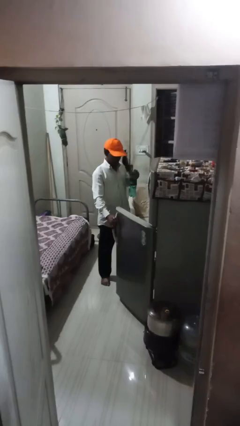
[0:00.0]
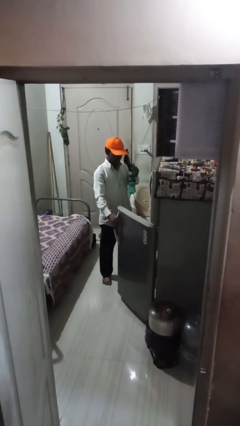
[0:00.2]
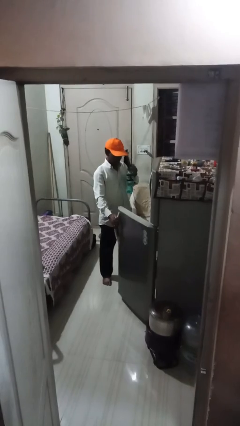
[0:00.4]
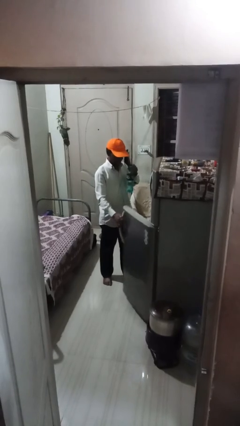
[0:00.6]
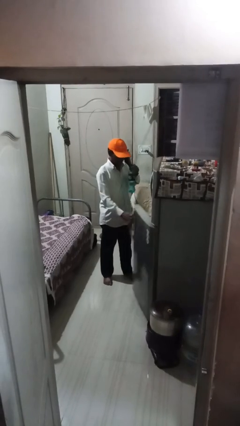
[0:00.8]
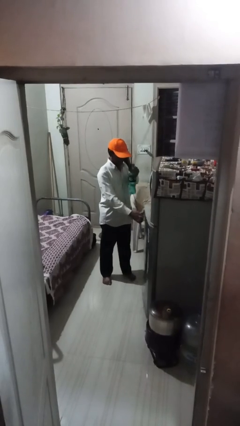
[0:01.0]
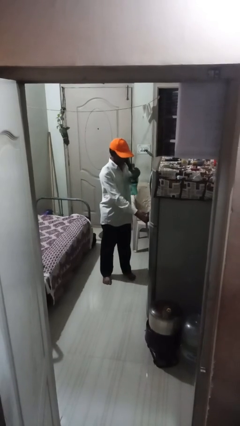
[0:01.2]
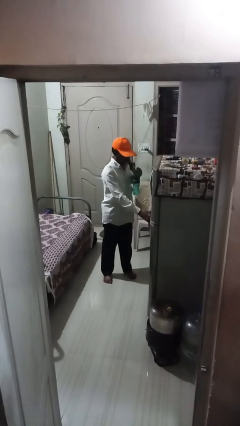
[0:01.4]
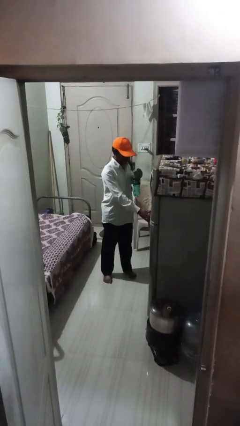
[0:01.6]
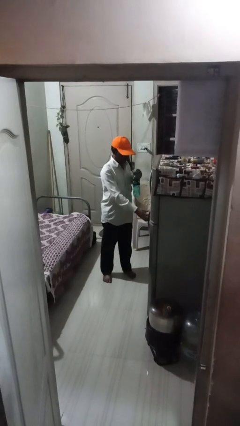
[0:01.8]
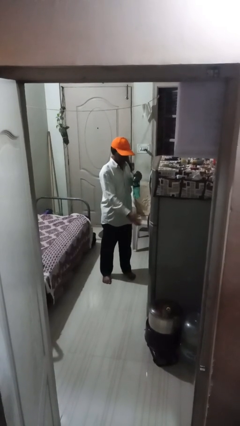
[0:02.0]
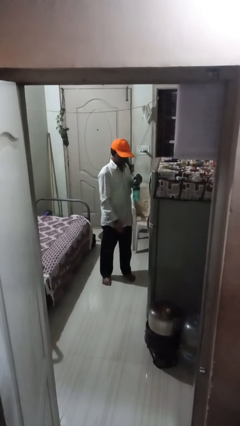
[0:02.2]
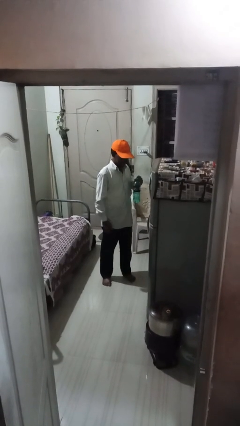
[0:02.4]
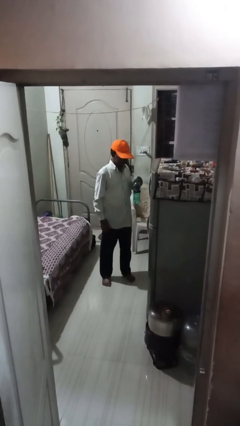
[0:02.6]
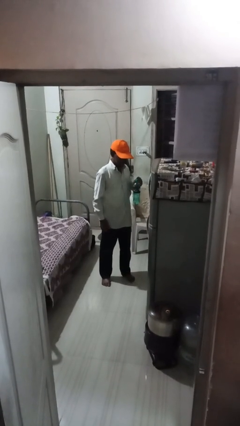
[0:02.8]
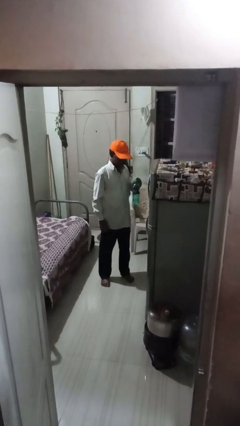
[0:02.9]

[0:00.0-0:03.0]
person closes refrigerator

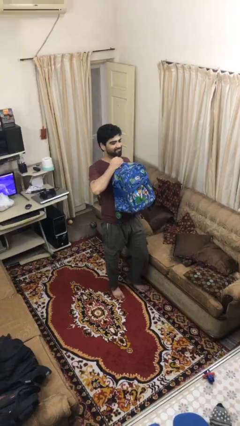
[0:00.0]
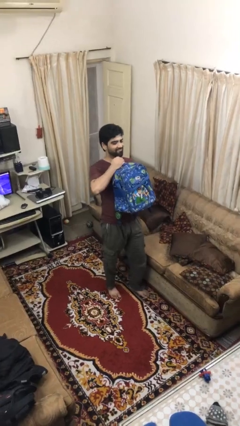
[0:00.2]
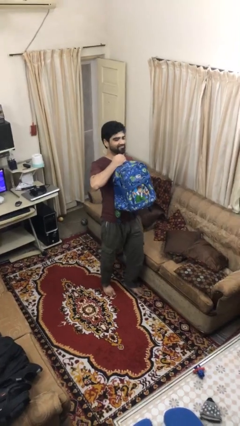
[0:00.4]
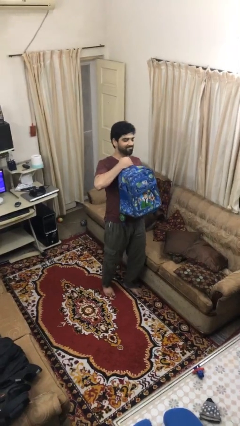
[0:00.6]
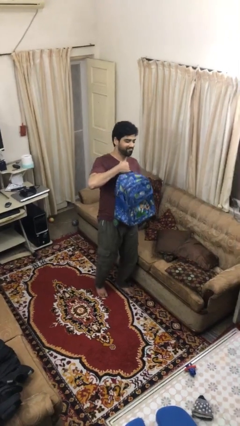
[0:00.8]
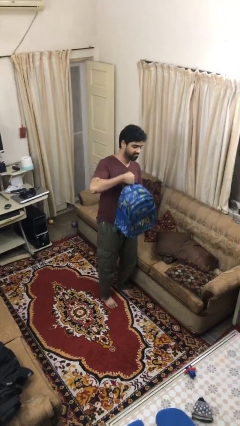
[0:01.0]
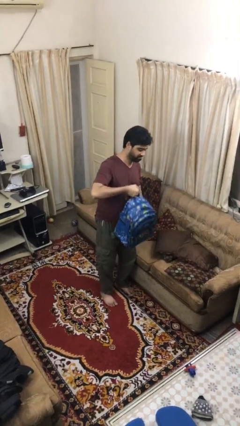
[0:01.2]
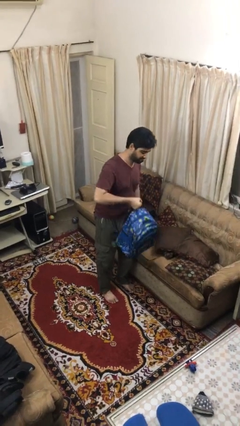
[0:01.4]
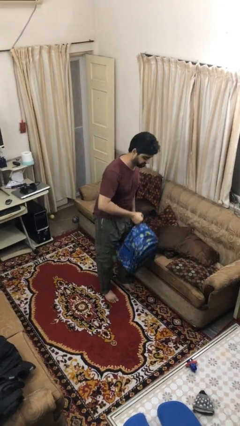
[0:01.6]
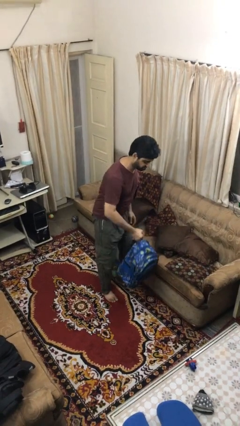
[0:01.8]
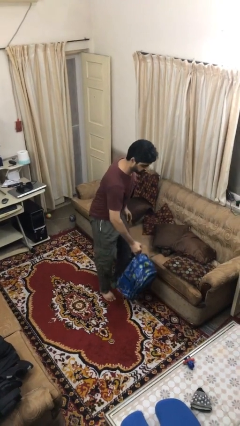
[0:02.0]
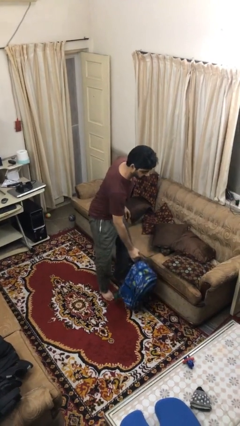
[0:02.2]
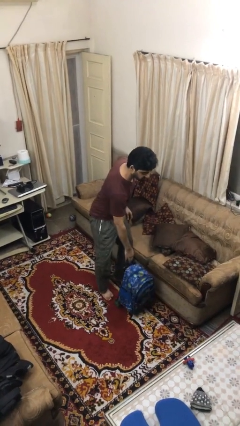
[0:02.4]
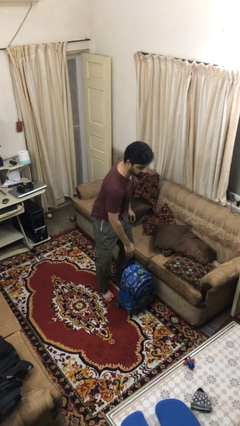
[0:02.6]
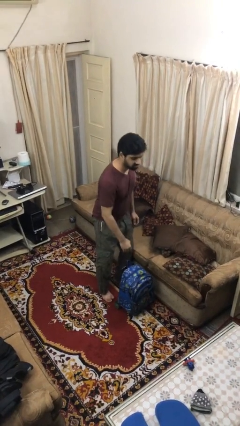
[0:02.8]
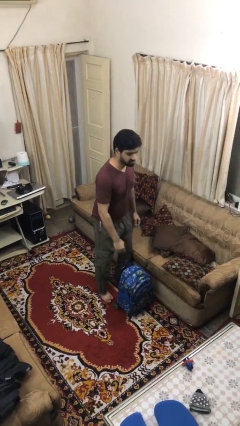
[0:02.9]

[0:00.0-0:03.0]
person puts down object on floor

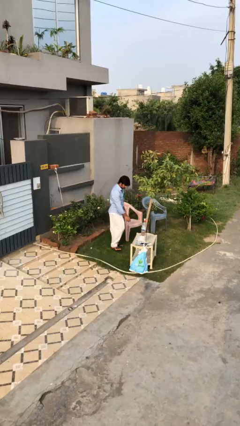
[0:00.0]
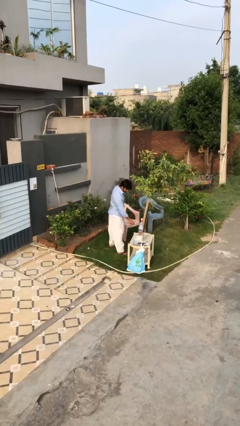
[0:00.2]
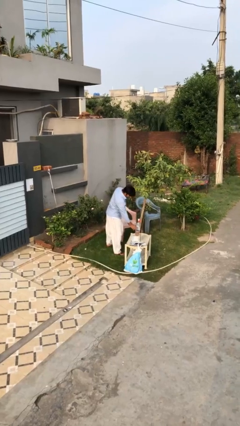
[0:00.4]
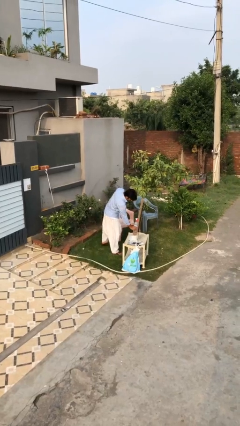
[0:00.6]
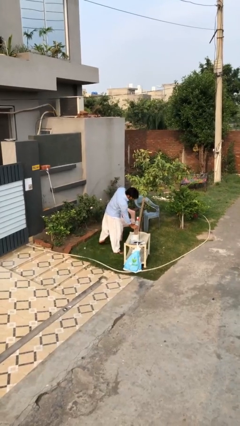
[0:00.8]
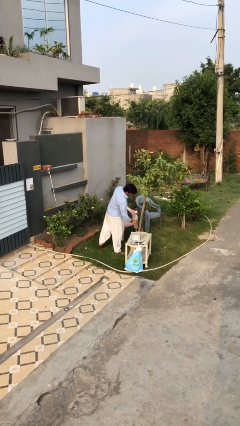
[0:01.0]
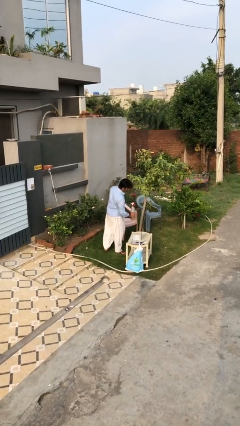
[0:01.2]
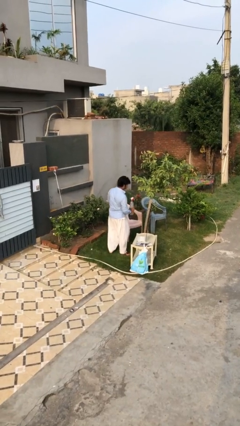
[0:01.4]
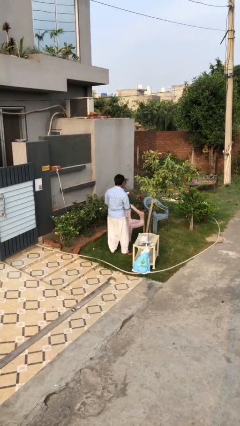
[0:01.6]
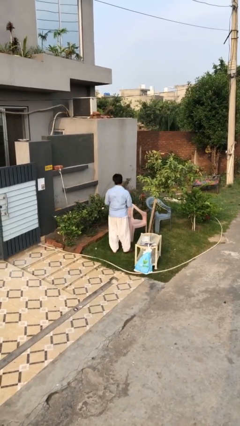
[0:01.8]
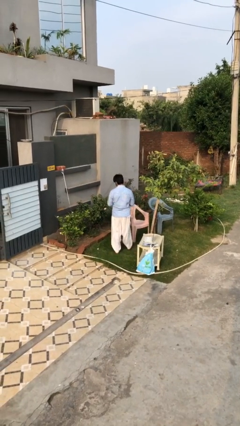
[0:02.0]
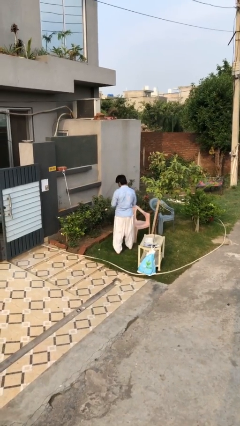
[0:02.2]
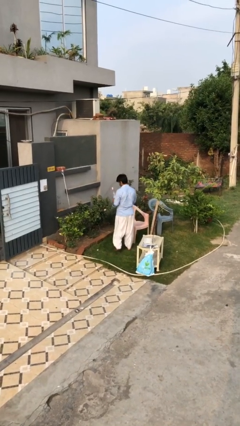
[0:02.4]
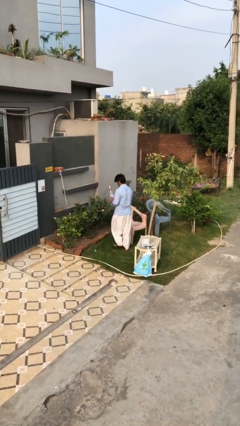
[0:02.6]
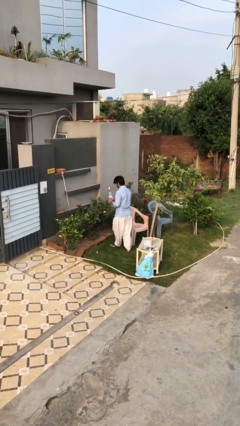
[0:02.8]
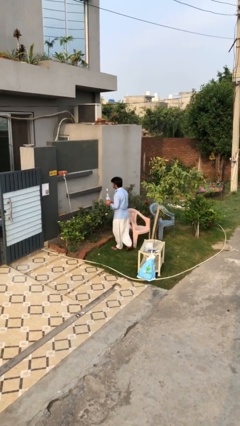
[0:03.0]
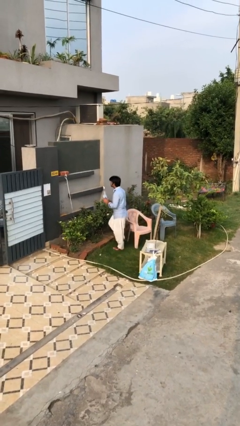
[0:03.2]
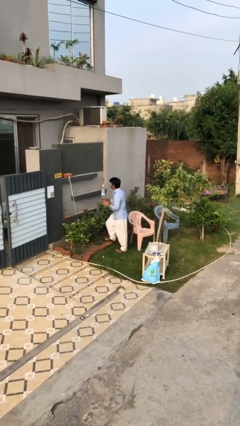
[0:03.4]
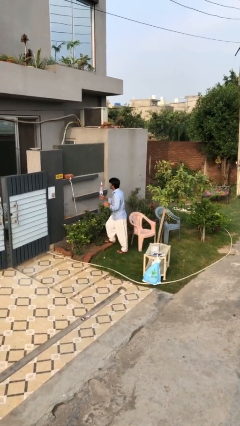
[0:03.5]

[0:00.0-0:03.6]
person picks up object from table

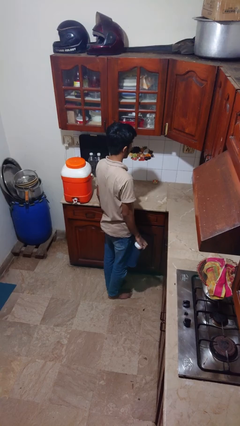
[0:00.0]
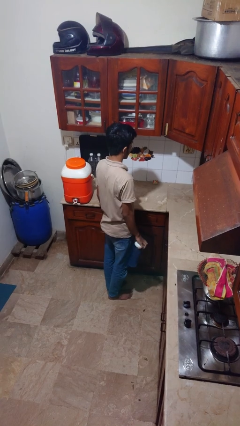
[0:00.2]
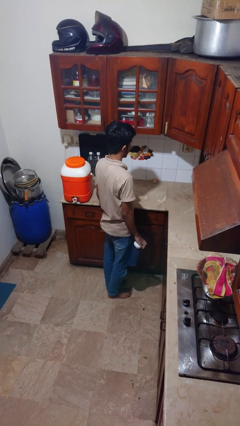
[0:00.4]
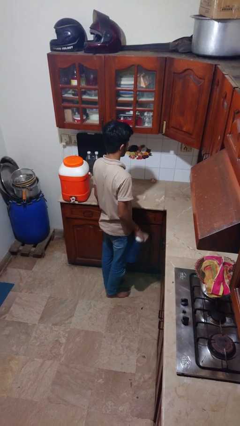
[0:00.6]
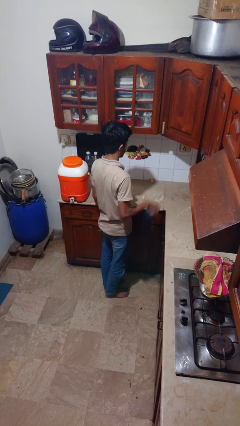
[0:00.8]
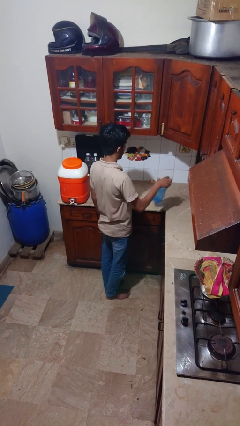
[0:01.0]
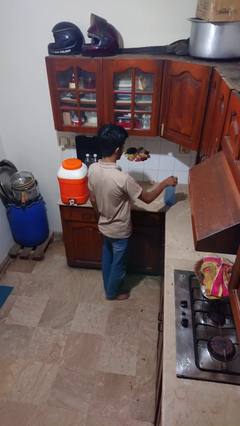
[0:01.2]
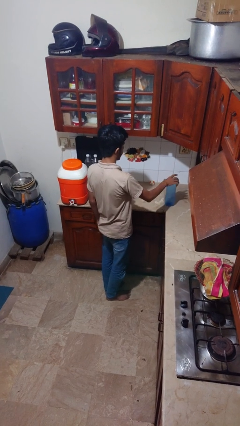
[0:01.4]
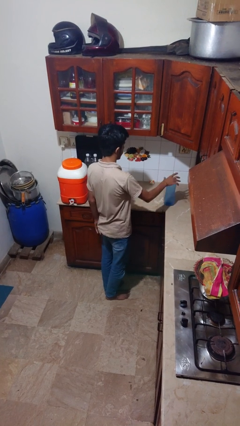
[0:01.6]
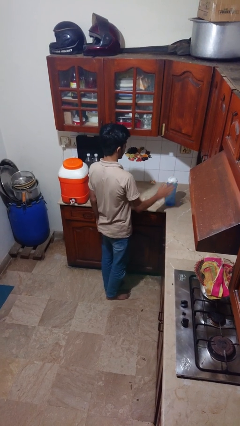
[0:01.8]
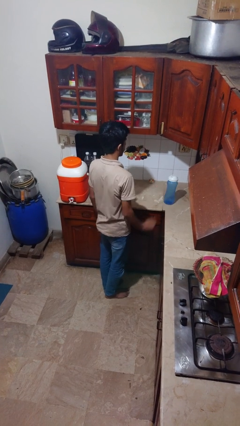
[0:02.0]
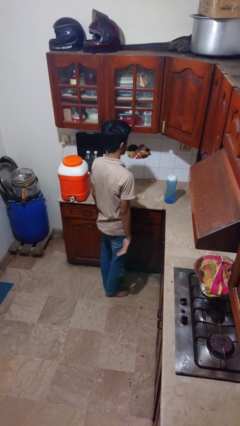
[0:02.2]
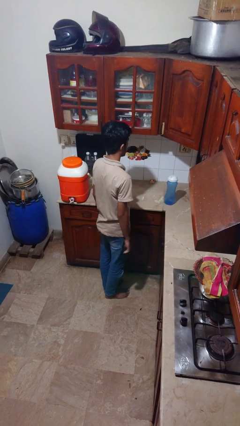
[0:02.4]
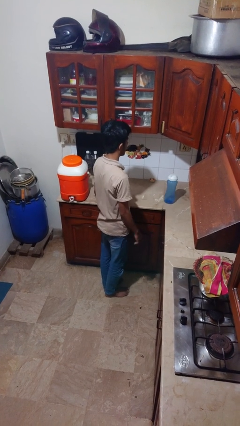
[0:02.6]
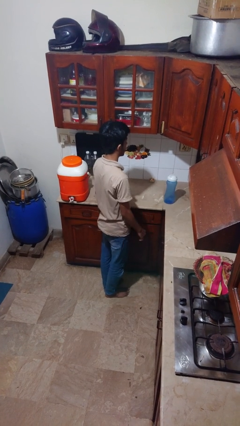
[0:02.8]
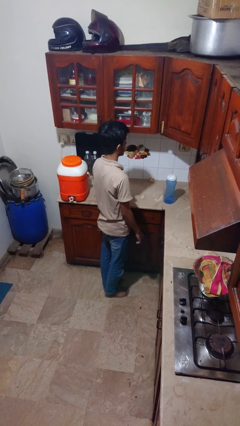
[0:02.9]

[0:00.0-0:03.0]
person puts down object on countertop

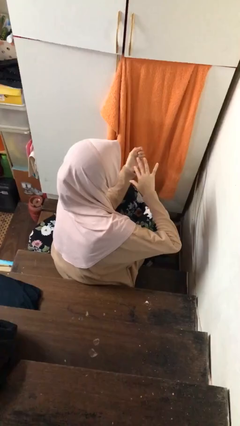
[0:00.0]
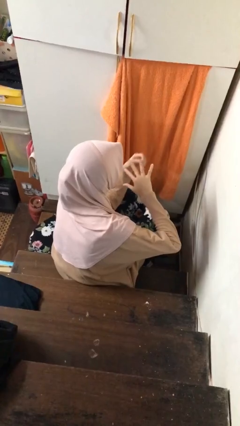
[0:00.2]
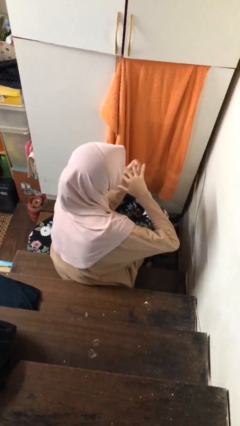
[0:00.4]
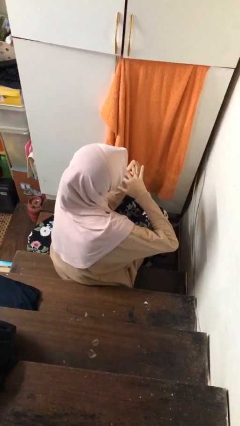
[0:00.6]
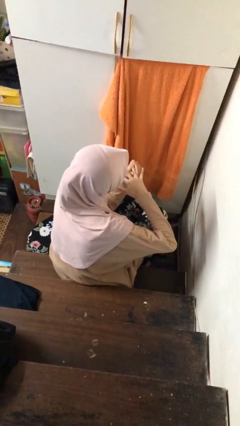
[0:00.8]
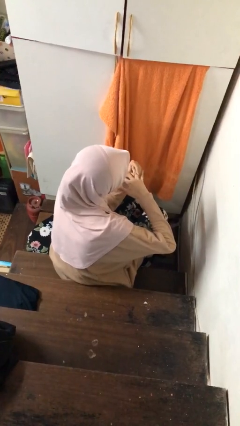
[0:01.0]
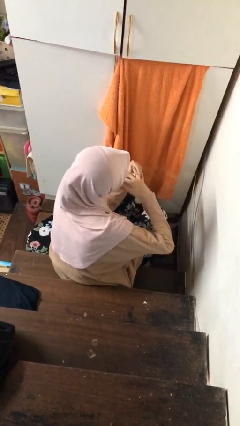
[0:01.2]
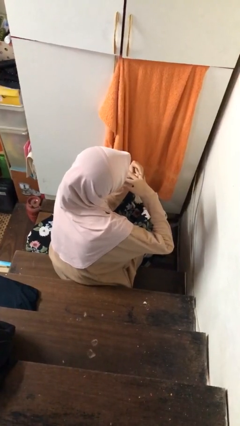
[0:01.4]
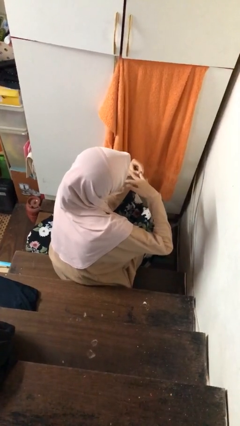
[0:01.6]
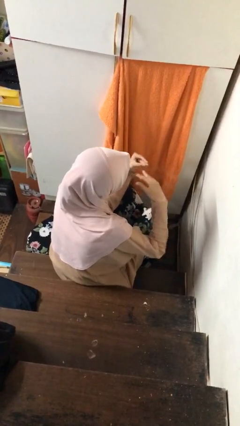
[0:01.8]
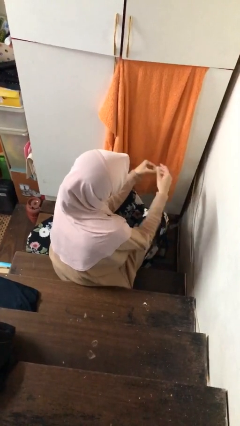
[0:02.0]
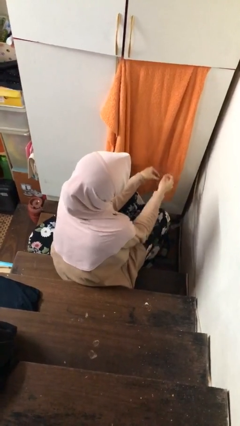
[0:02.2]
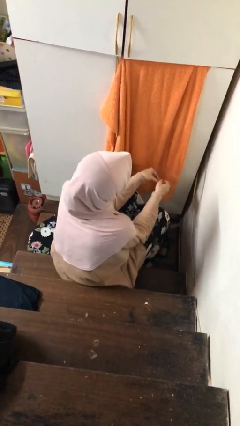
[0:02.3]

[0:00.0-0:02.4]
person takes off ring

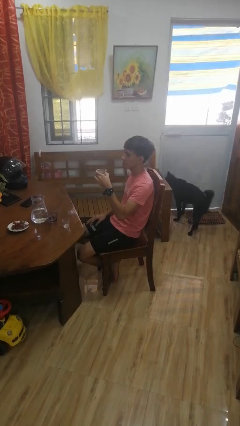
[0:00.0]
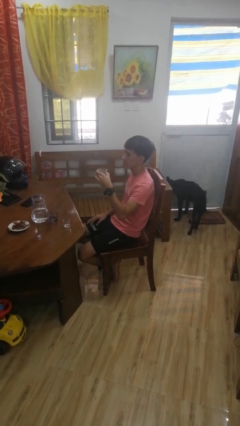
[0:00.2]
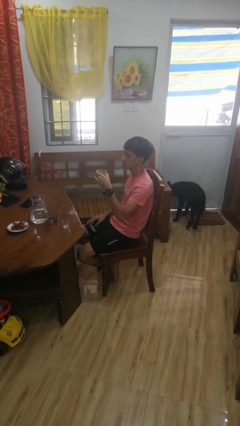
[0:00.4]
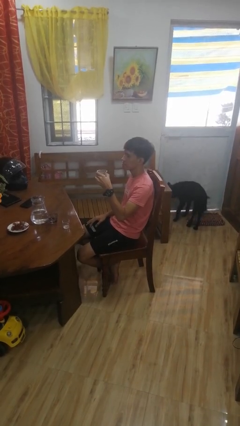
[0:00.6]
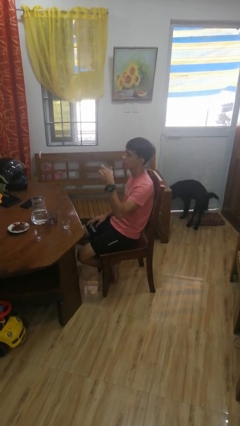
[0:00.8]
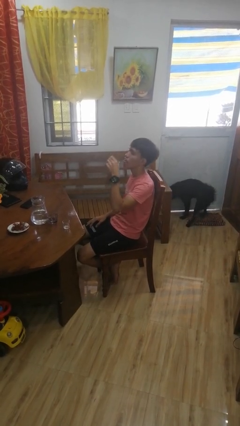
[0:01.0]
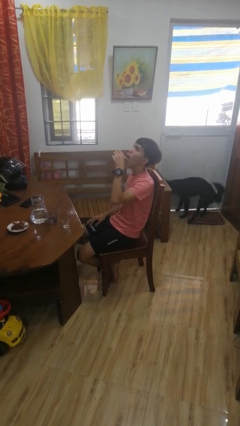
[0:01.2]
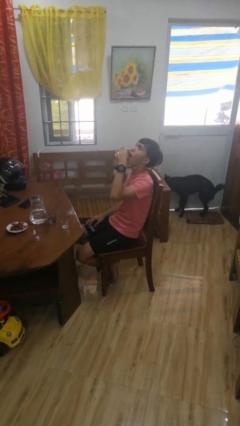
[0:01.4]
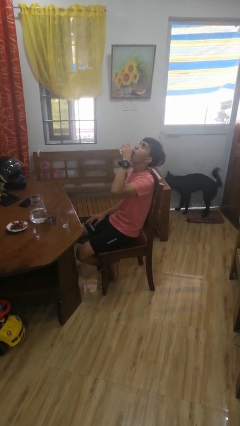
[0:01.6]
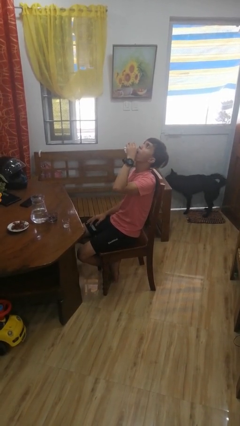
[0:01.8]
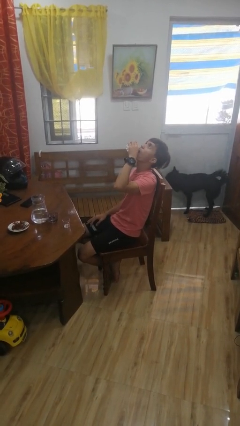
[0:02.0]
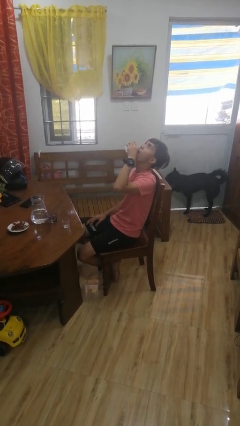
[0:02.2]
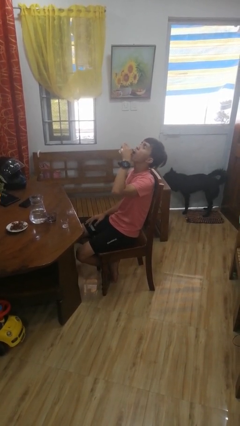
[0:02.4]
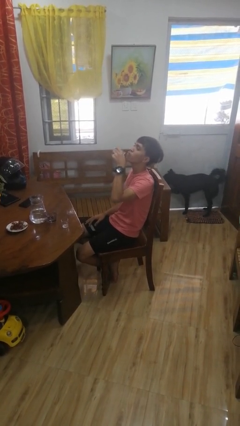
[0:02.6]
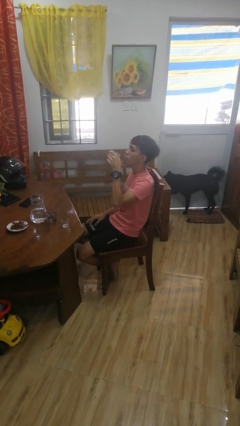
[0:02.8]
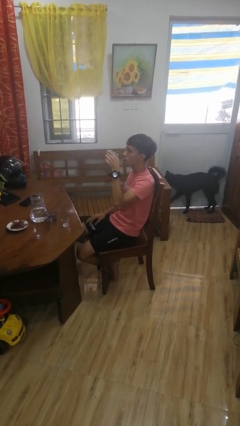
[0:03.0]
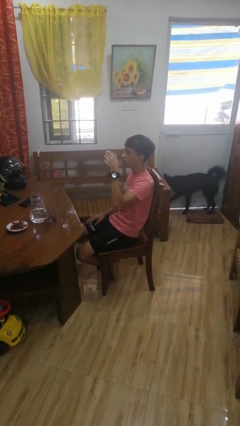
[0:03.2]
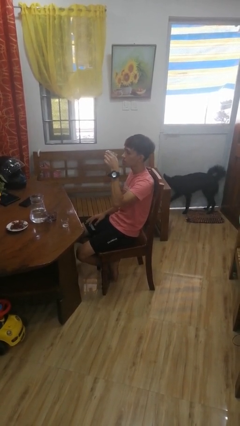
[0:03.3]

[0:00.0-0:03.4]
person drinks from shotglass
